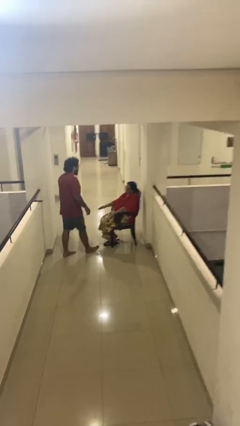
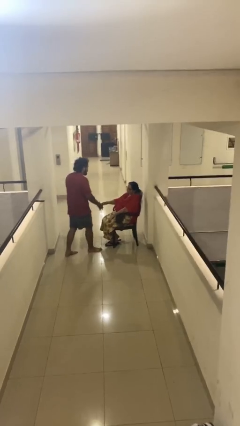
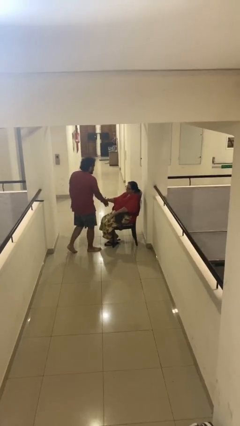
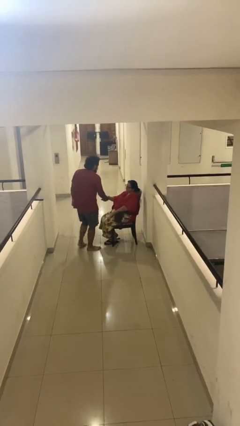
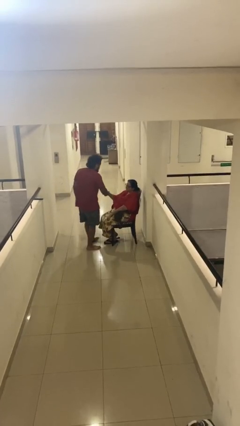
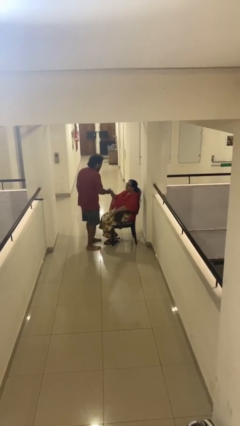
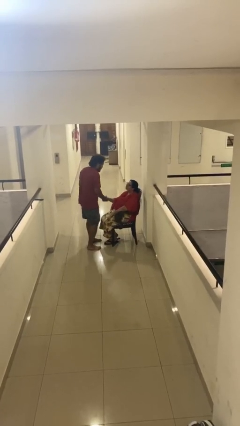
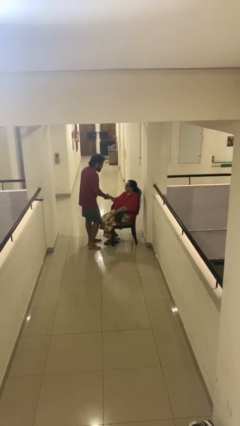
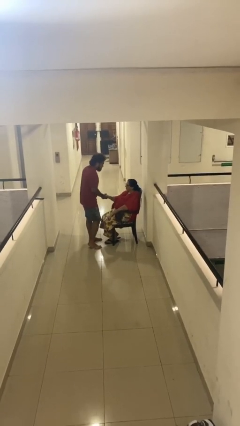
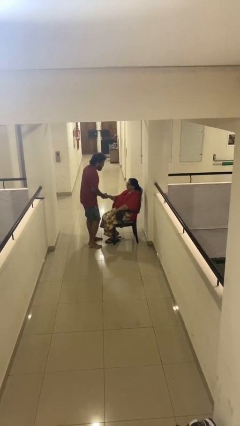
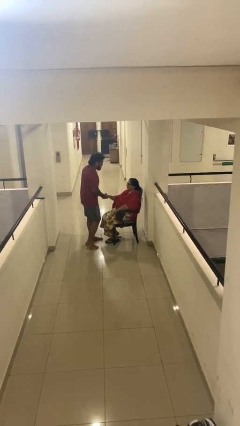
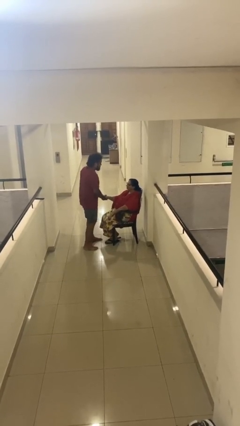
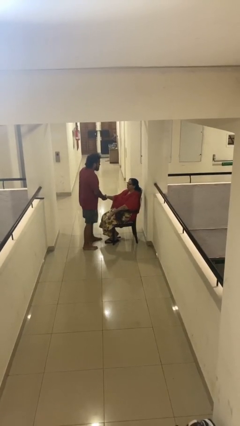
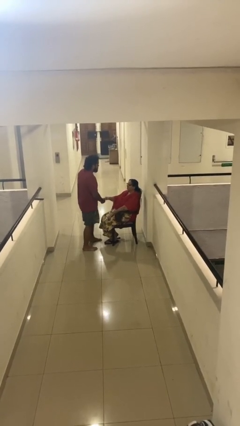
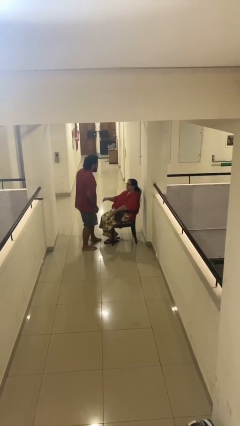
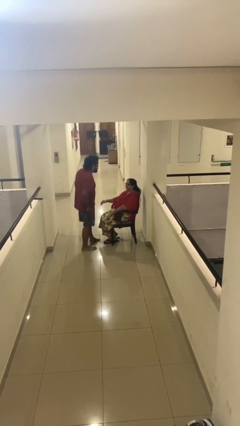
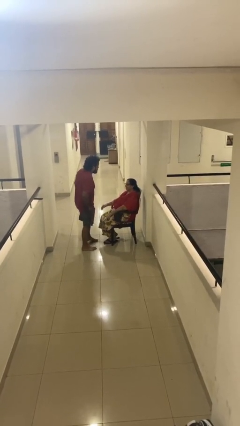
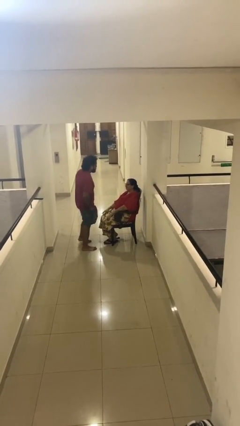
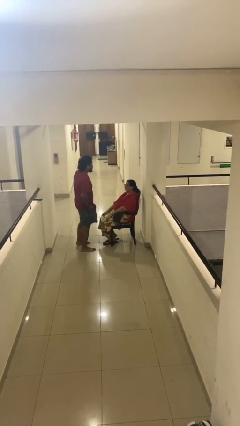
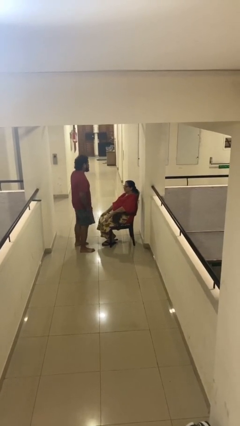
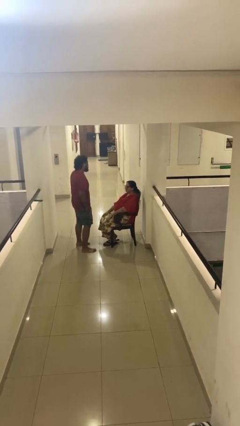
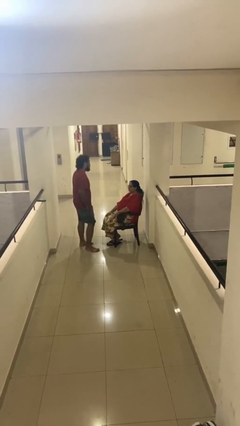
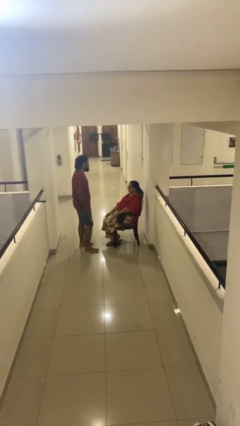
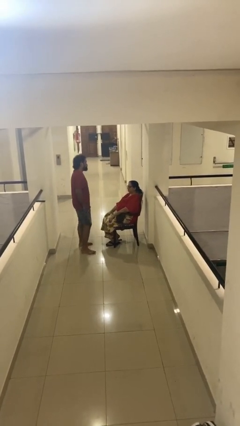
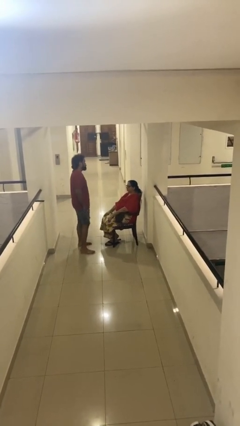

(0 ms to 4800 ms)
person shakes hand

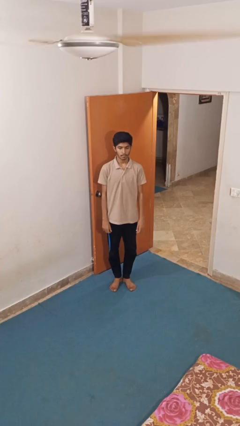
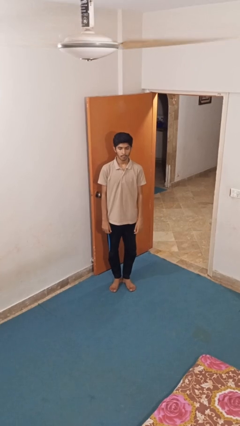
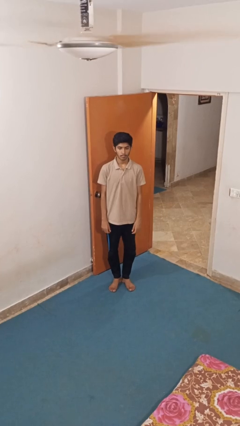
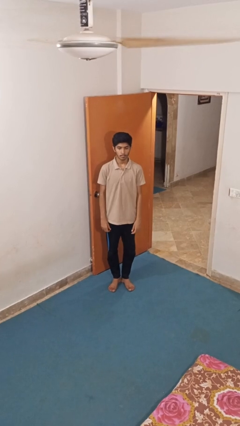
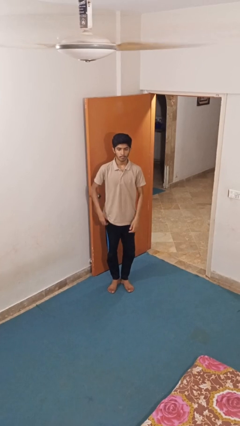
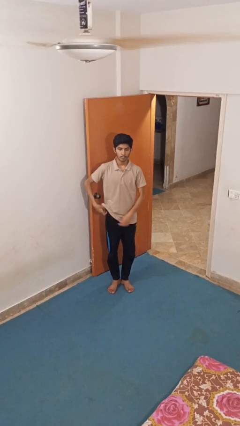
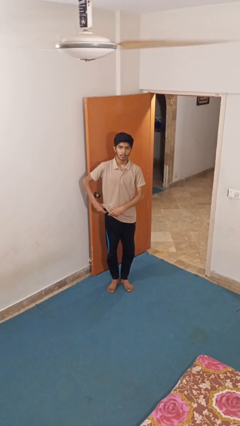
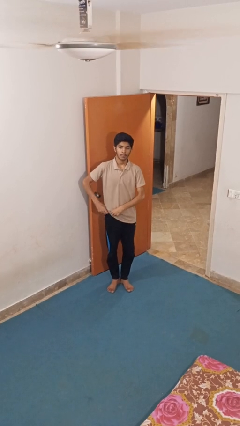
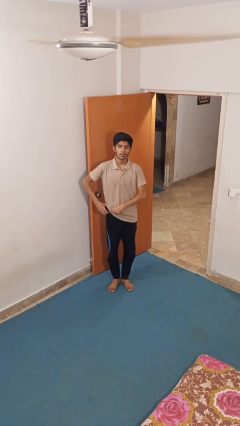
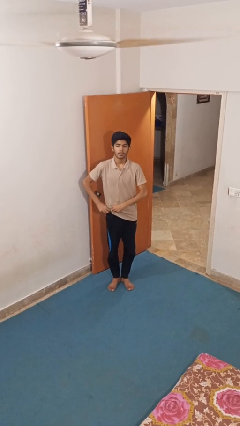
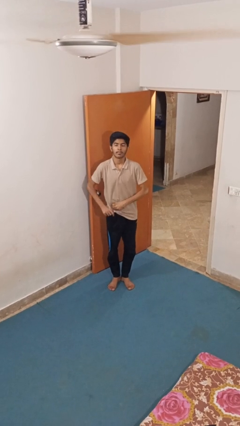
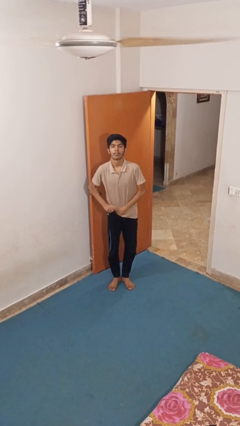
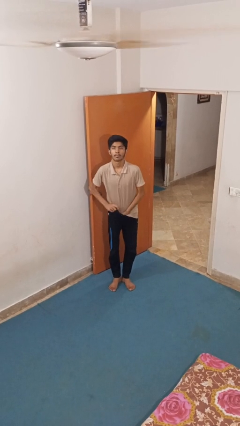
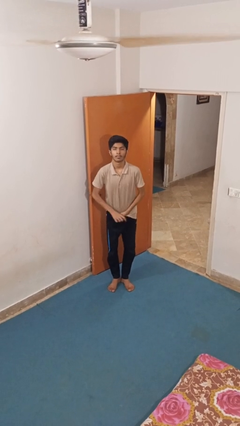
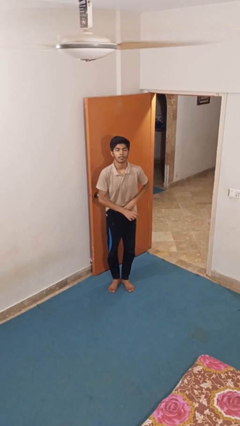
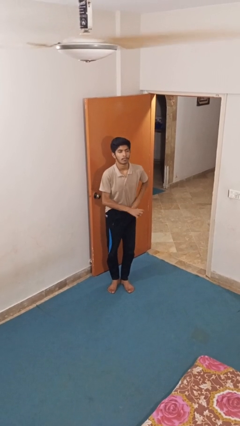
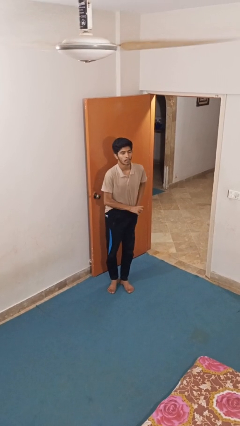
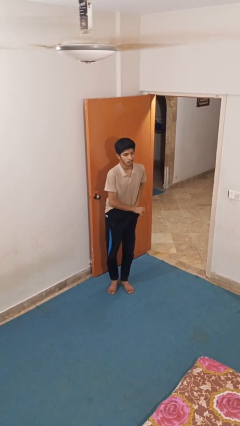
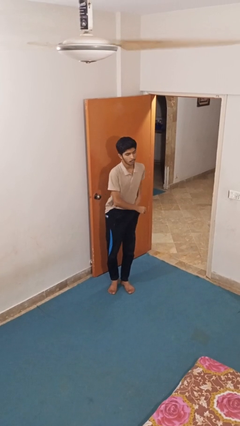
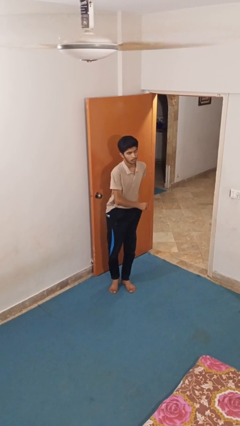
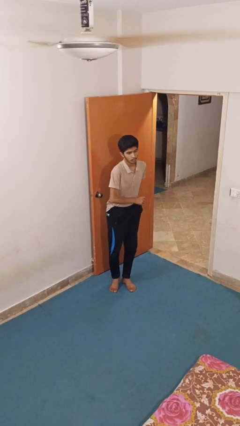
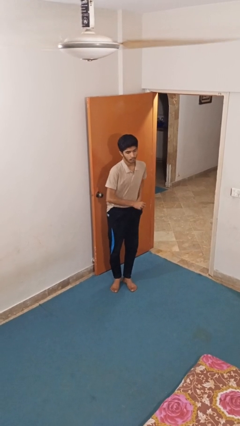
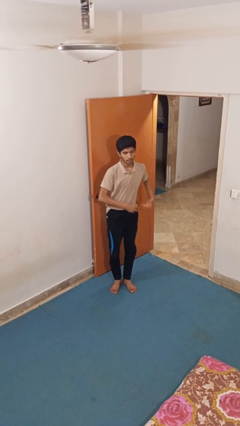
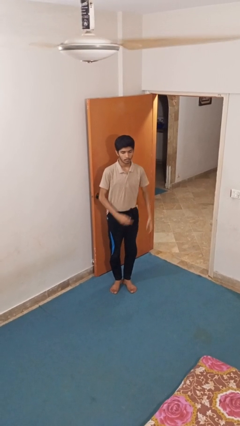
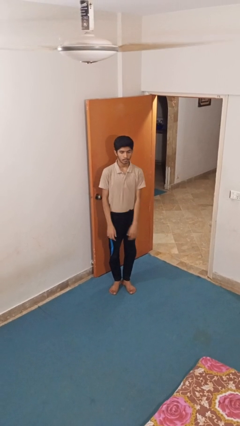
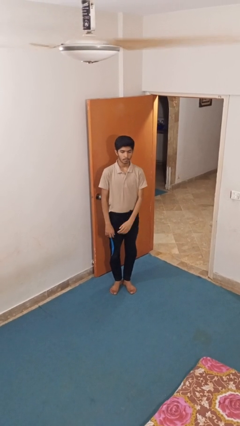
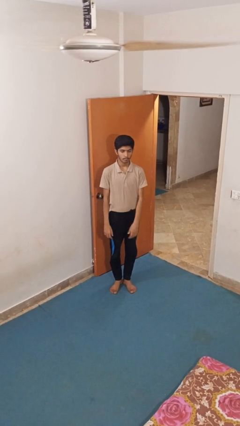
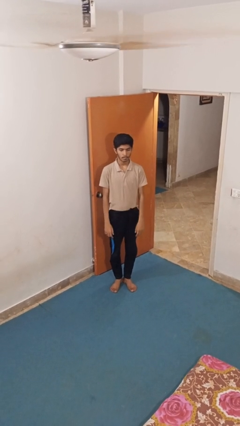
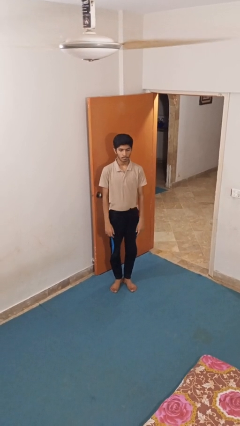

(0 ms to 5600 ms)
person tucks in shirt

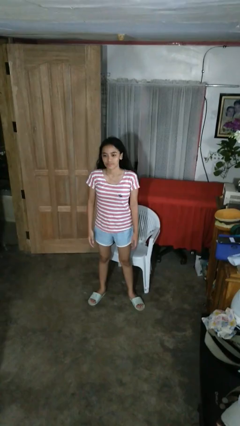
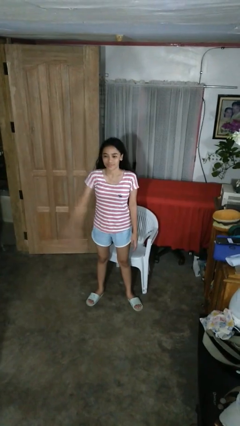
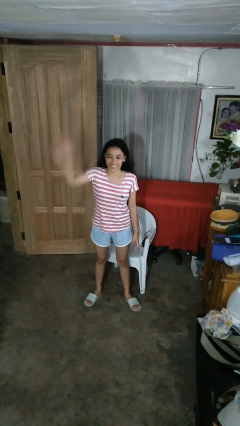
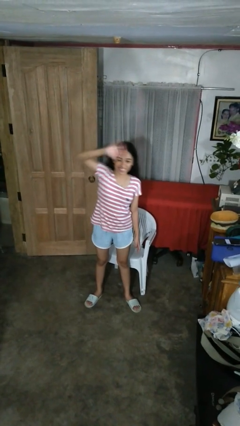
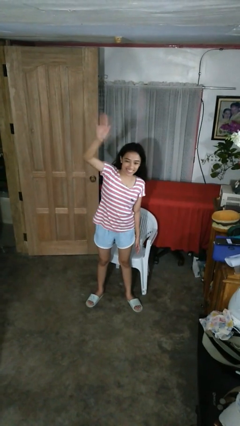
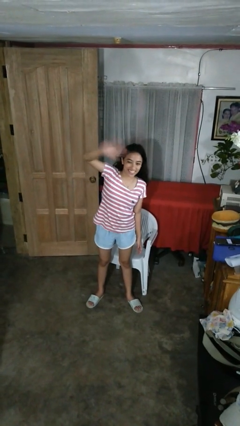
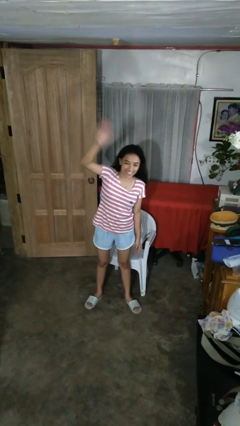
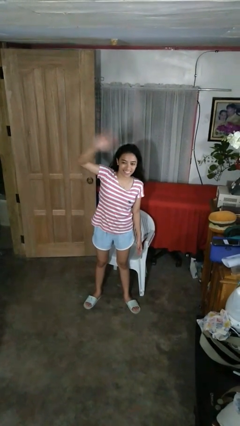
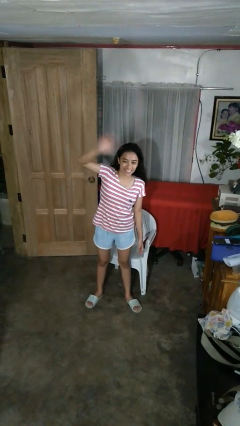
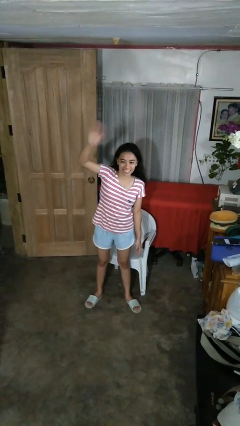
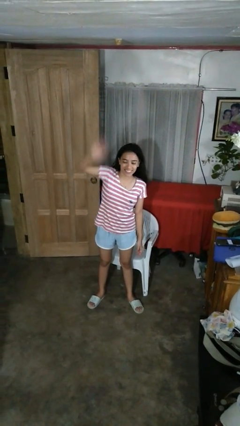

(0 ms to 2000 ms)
person waves at person

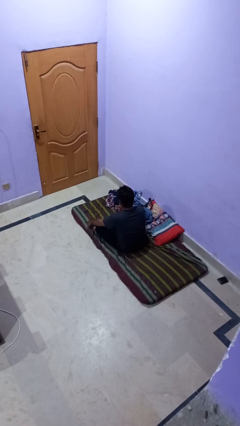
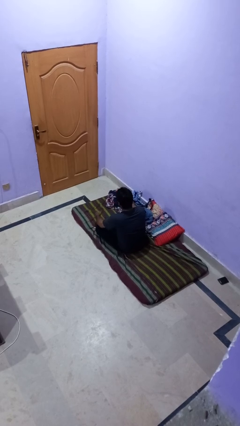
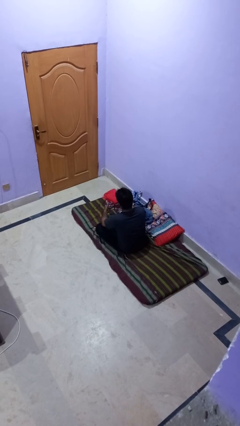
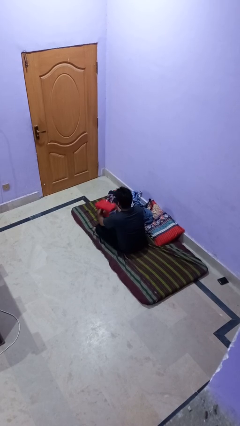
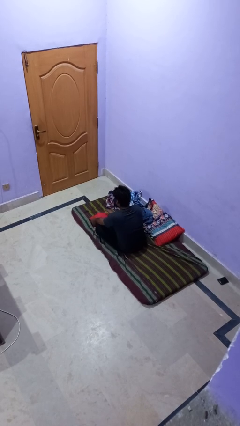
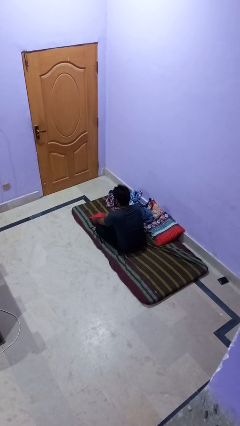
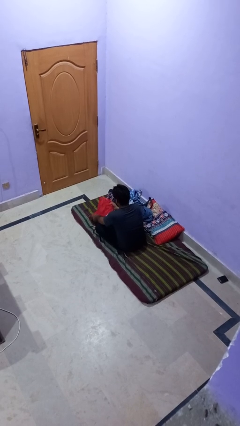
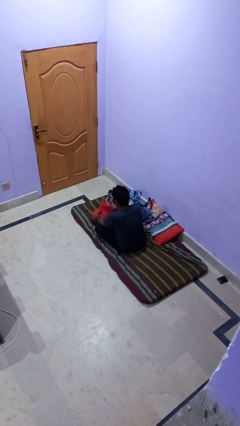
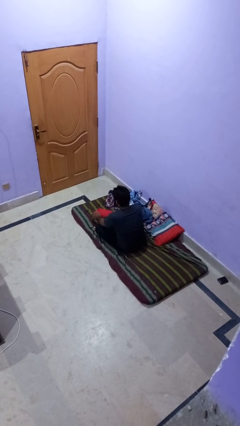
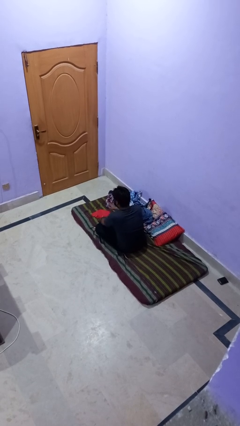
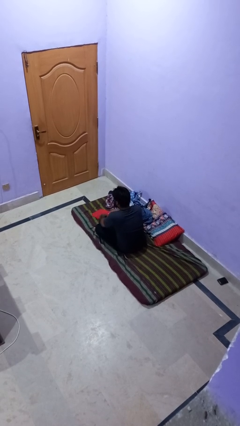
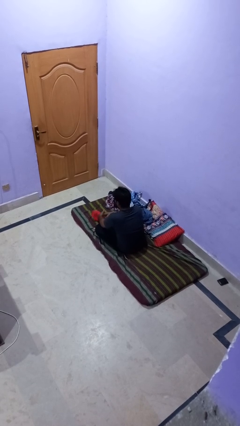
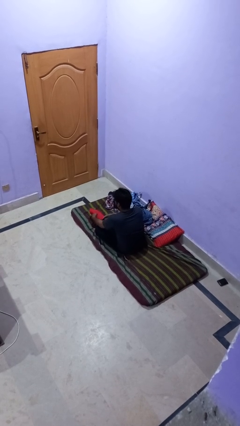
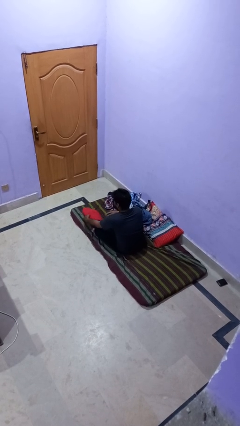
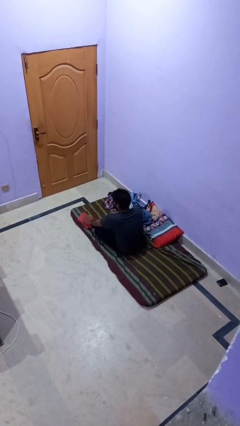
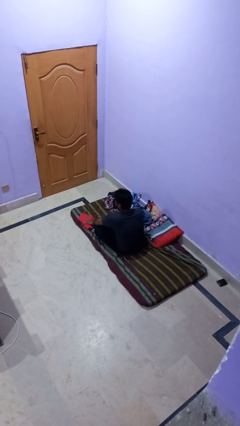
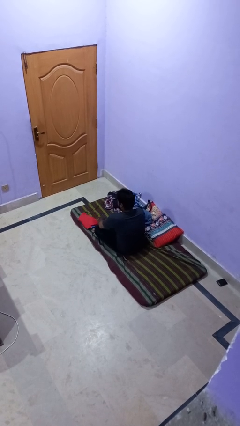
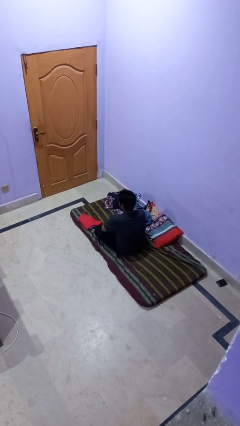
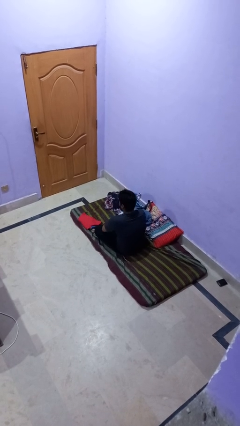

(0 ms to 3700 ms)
person folds shirt

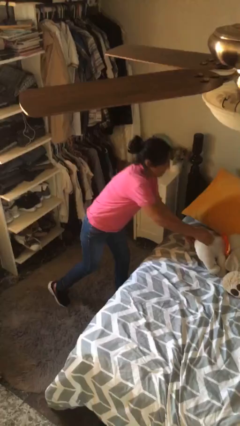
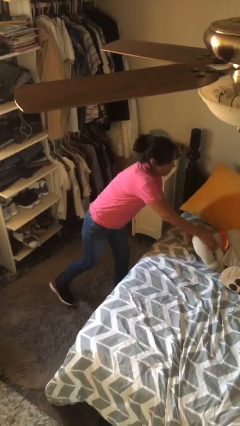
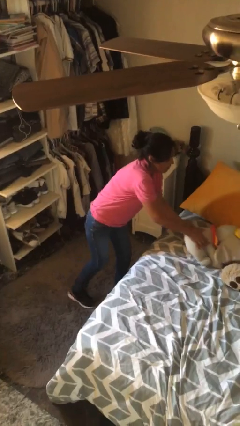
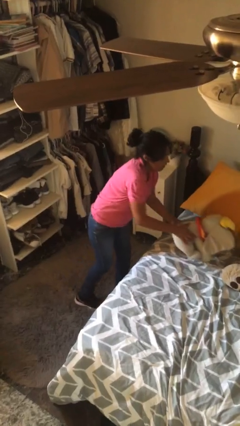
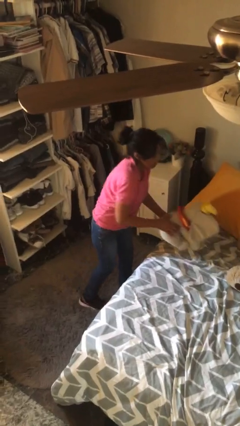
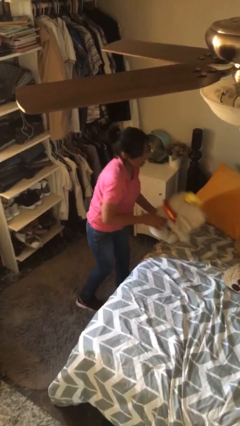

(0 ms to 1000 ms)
person picks up object from bed

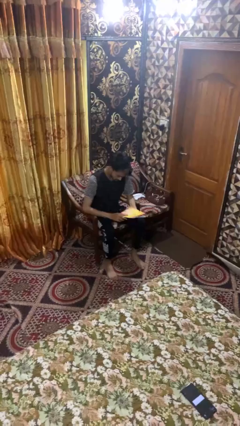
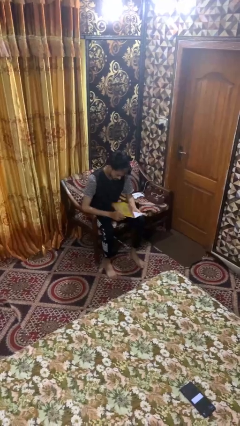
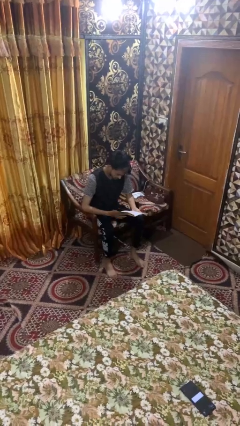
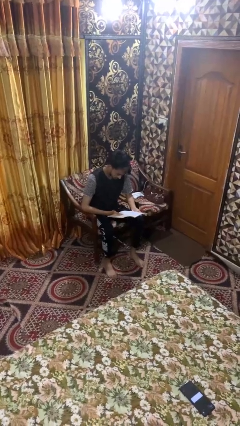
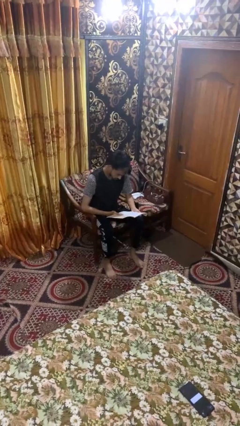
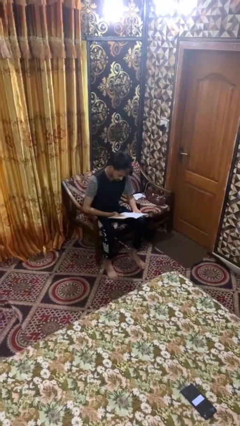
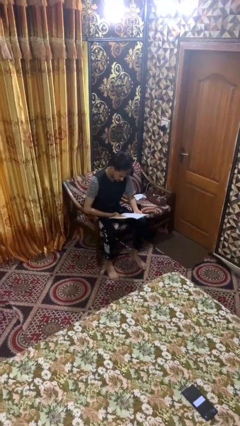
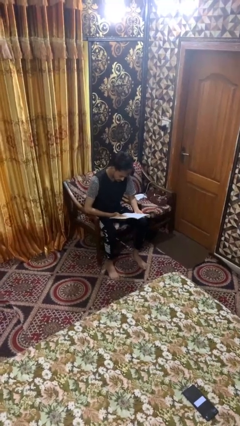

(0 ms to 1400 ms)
person reads magazine
